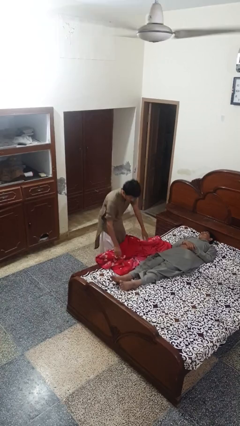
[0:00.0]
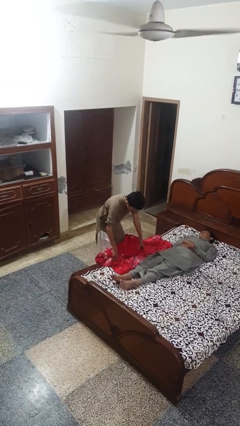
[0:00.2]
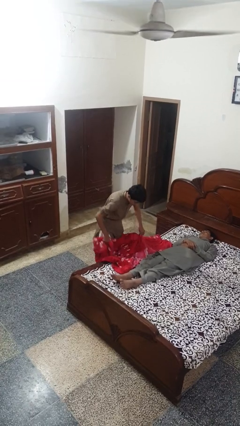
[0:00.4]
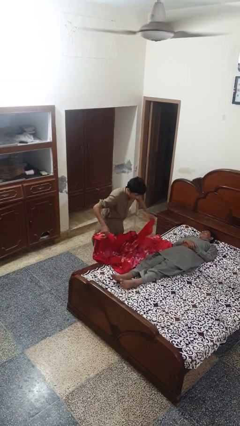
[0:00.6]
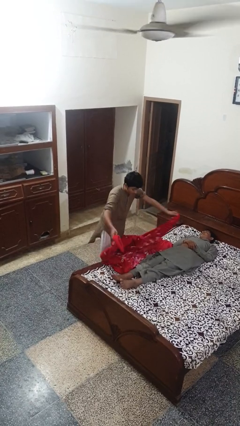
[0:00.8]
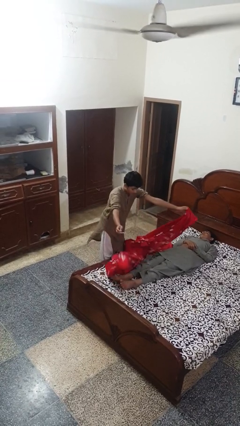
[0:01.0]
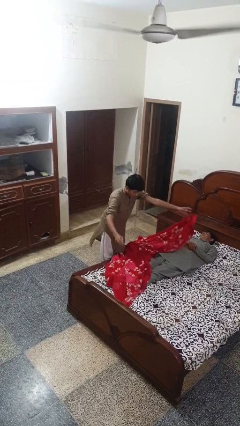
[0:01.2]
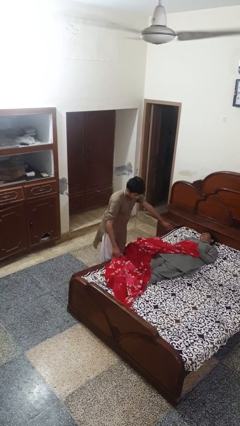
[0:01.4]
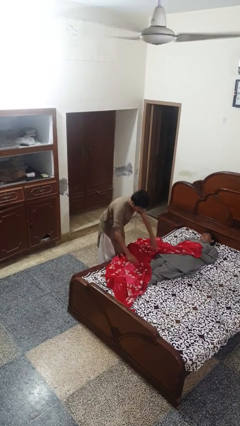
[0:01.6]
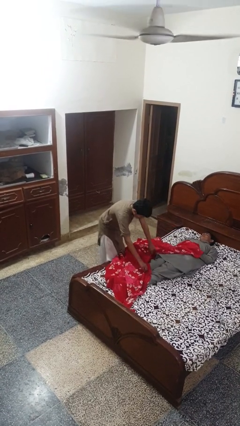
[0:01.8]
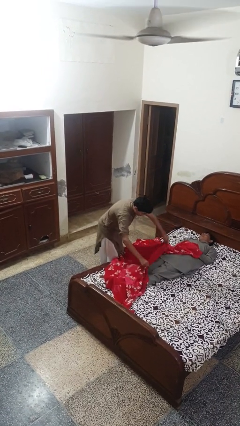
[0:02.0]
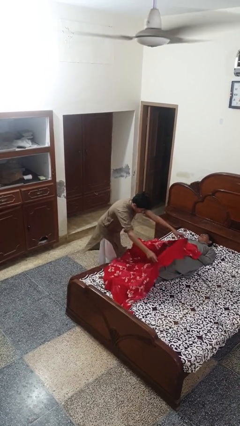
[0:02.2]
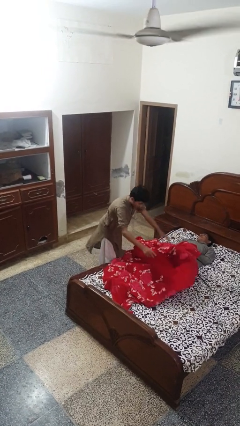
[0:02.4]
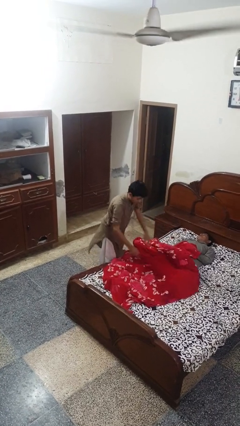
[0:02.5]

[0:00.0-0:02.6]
person covers friend with blanket

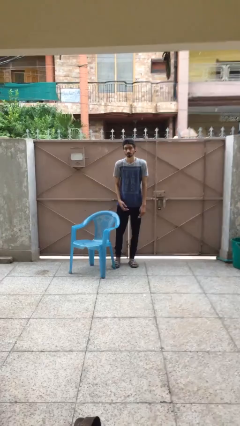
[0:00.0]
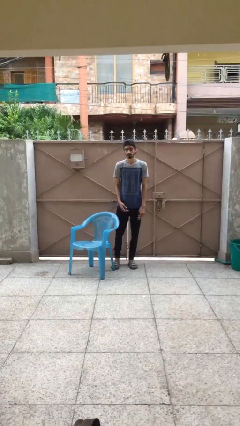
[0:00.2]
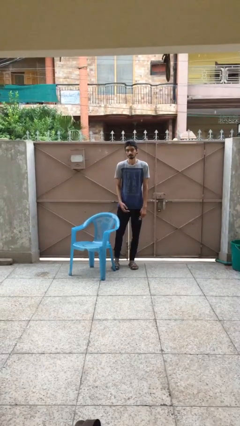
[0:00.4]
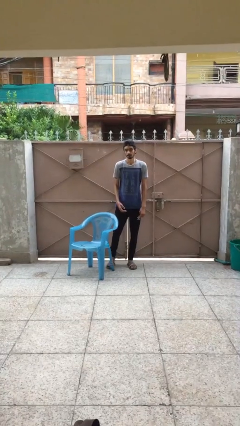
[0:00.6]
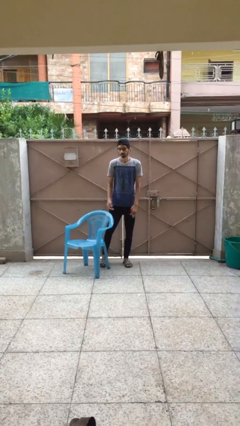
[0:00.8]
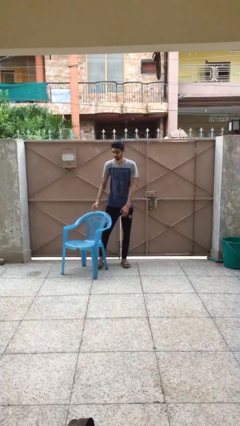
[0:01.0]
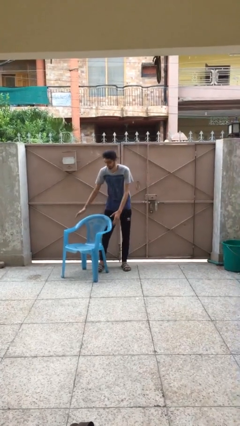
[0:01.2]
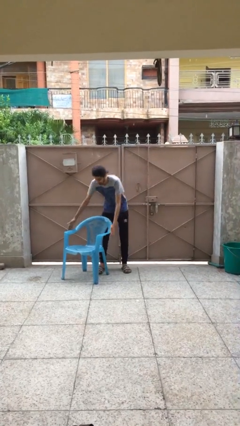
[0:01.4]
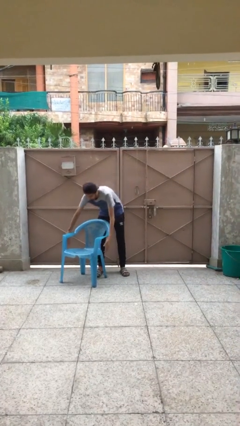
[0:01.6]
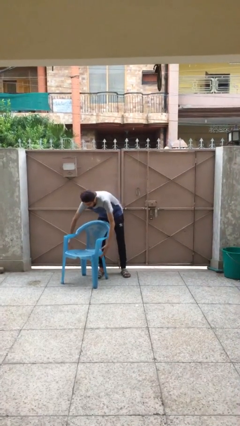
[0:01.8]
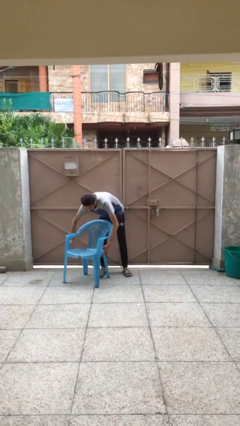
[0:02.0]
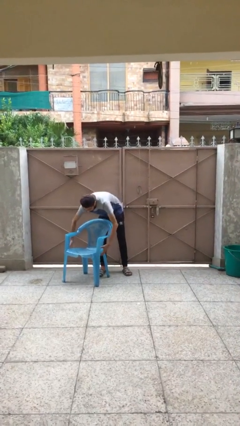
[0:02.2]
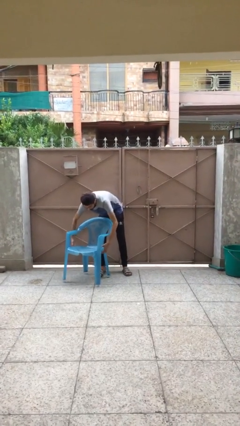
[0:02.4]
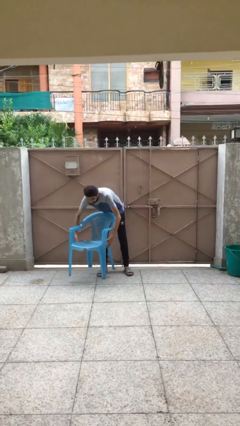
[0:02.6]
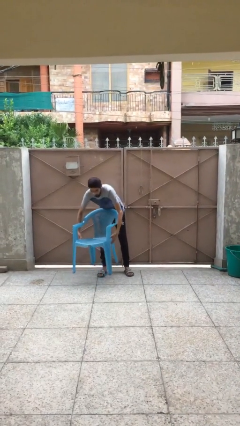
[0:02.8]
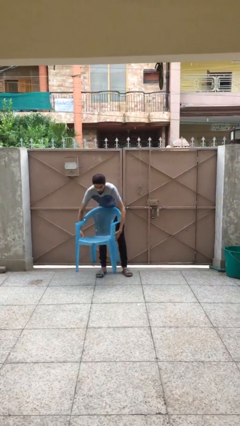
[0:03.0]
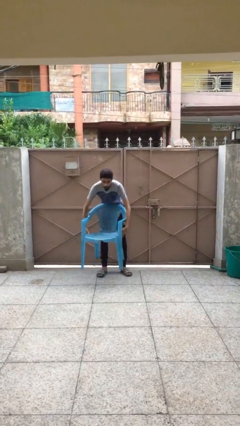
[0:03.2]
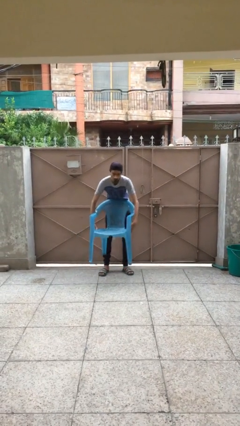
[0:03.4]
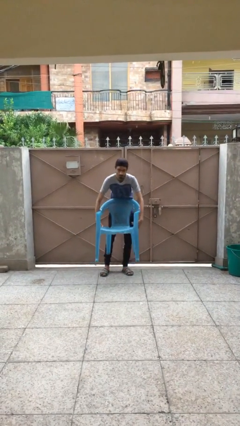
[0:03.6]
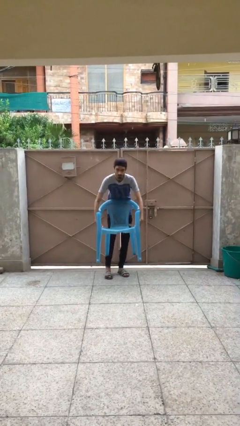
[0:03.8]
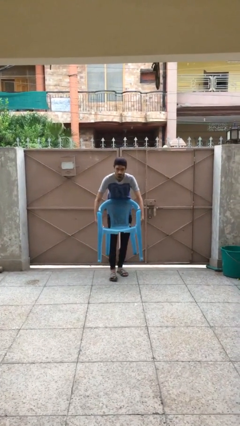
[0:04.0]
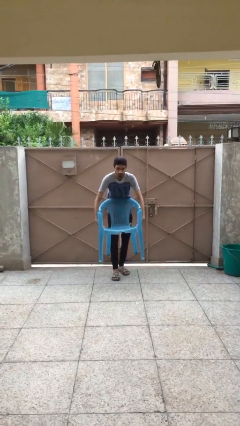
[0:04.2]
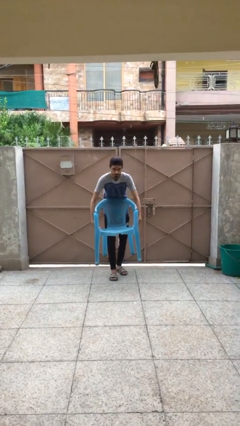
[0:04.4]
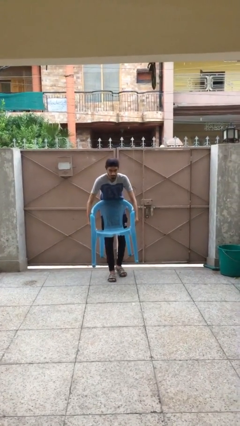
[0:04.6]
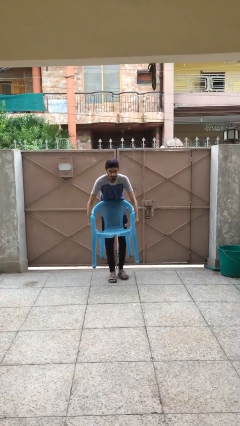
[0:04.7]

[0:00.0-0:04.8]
person carries heavy object

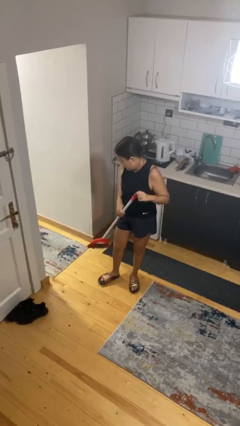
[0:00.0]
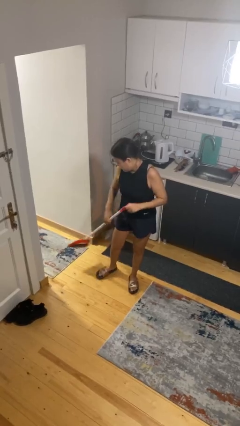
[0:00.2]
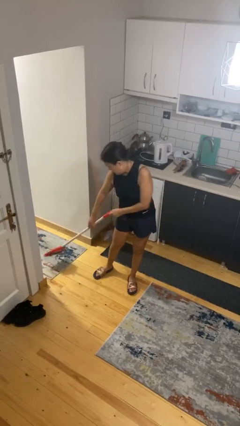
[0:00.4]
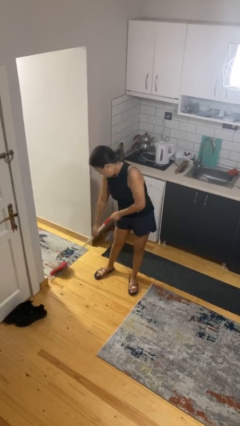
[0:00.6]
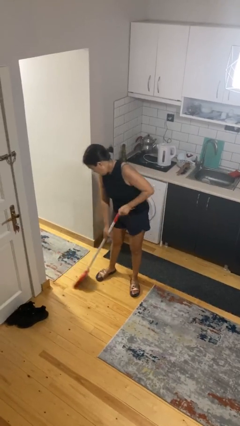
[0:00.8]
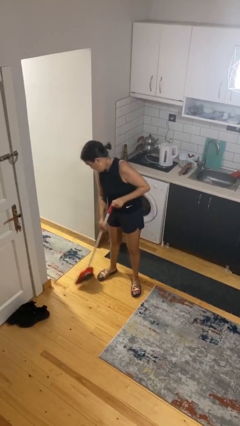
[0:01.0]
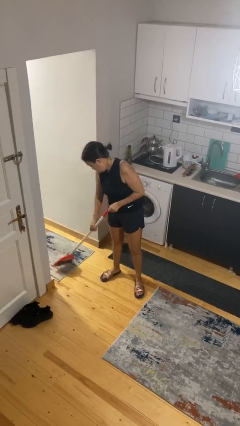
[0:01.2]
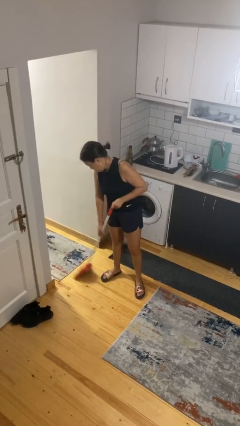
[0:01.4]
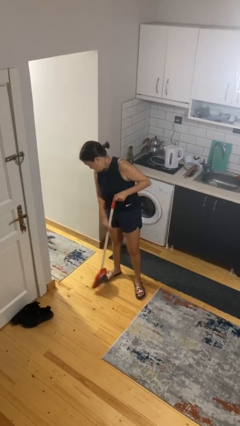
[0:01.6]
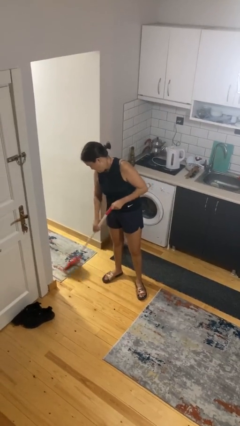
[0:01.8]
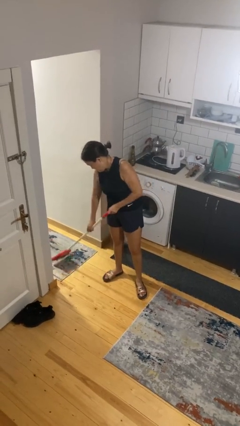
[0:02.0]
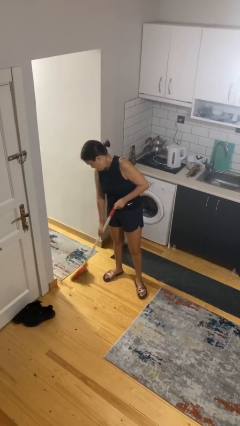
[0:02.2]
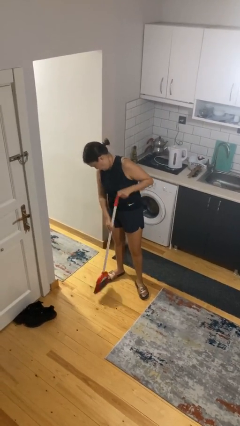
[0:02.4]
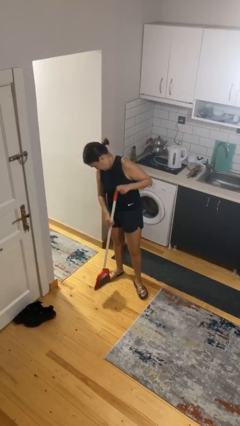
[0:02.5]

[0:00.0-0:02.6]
person sweeps floor

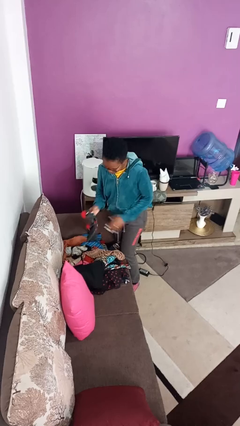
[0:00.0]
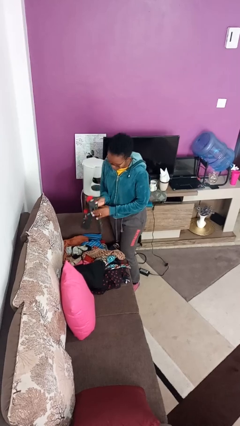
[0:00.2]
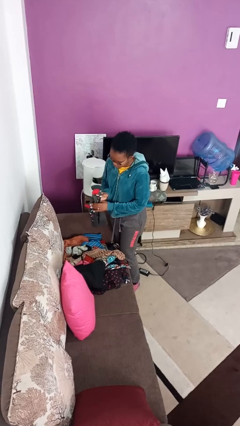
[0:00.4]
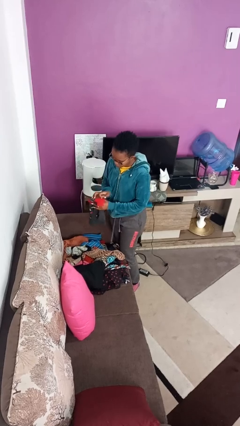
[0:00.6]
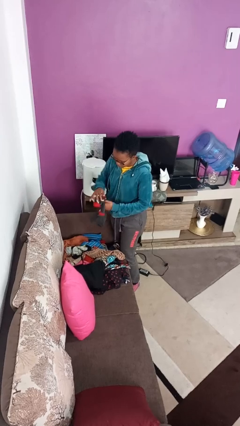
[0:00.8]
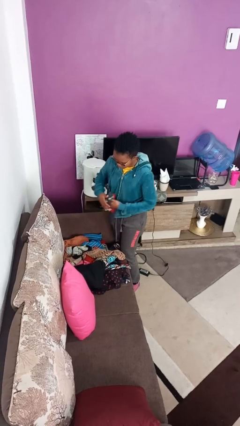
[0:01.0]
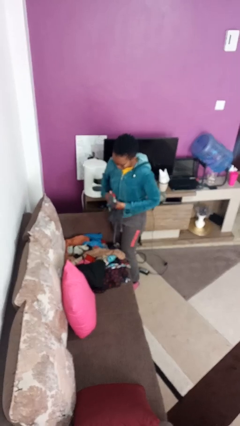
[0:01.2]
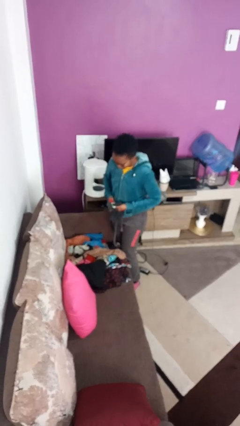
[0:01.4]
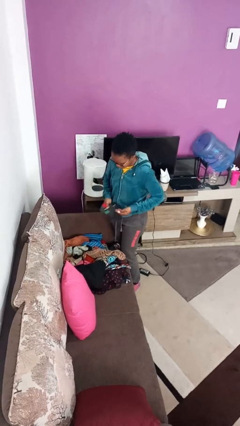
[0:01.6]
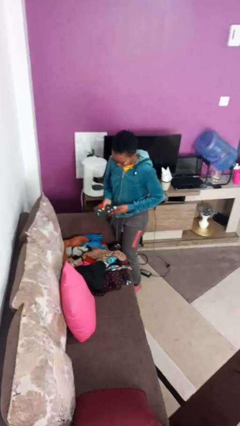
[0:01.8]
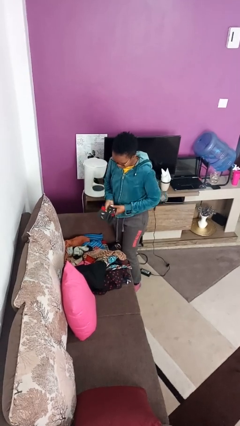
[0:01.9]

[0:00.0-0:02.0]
person folds socks

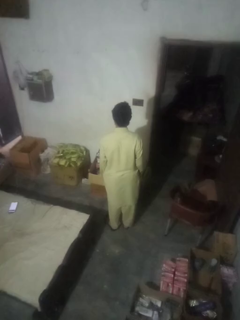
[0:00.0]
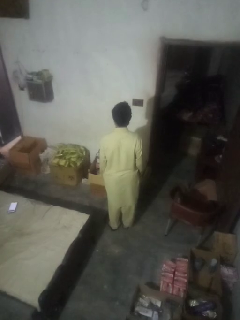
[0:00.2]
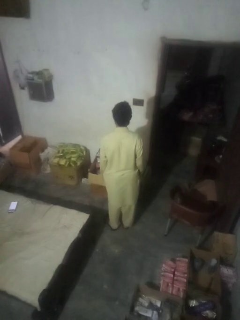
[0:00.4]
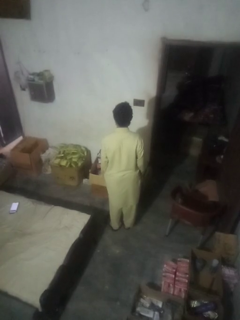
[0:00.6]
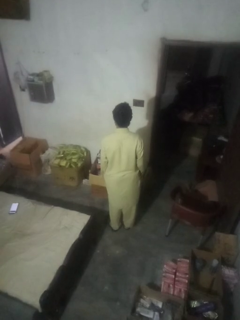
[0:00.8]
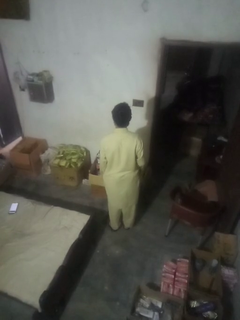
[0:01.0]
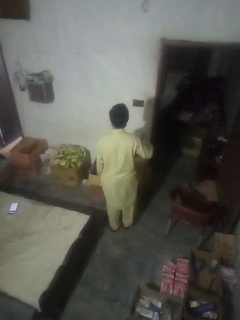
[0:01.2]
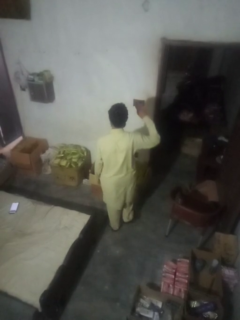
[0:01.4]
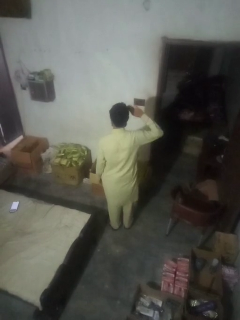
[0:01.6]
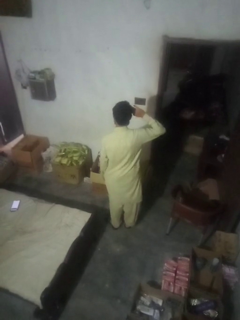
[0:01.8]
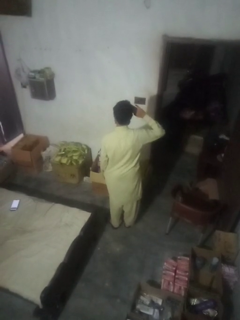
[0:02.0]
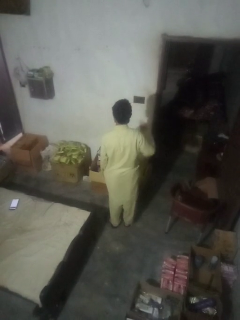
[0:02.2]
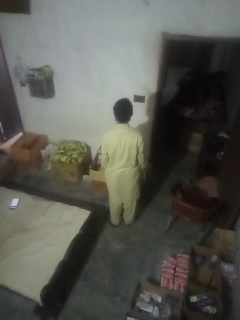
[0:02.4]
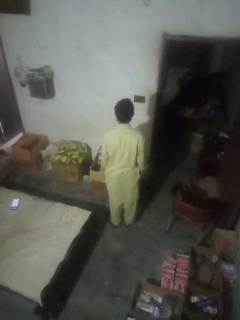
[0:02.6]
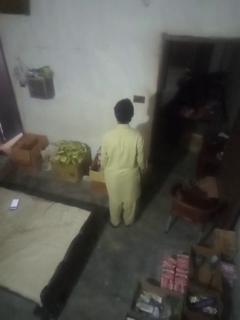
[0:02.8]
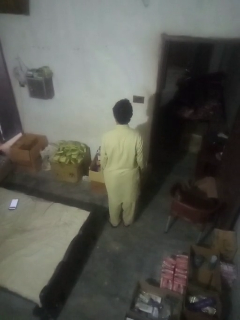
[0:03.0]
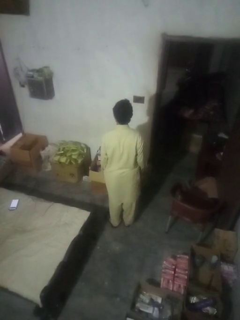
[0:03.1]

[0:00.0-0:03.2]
person salutes

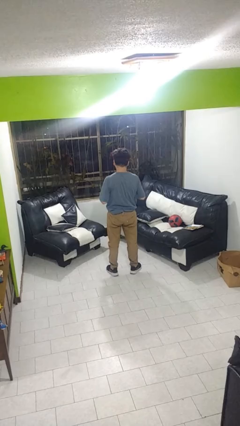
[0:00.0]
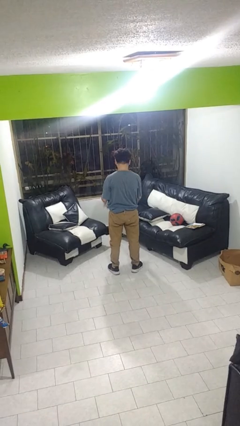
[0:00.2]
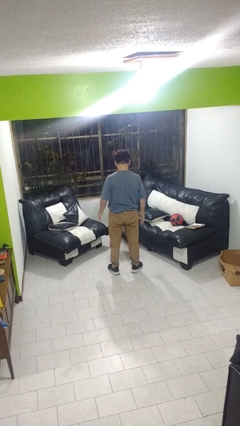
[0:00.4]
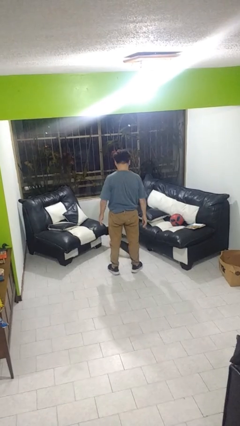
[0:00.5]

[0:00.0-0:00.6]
person drops object

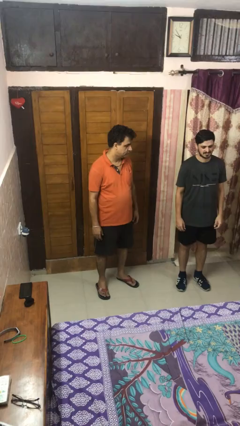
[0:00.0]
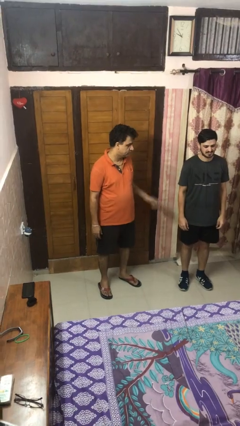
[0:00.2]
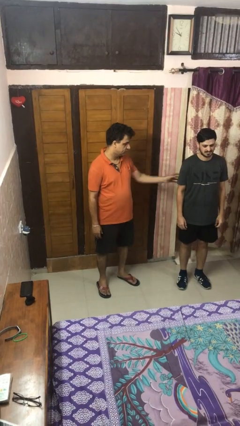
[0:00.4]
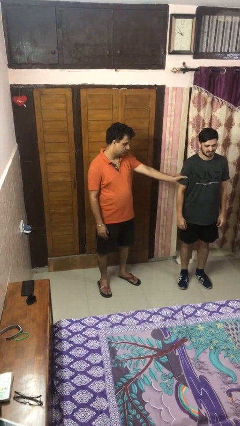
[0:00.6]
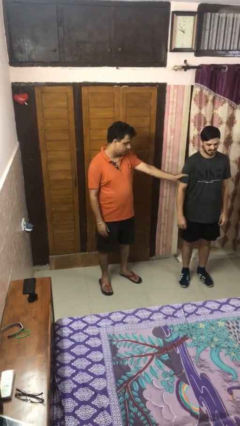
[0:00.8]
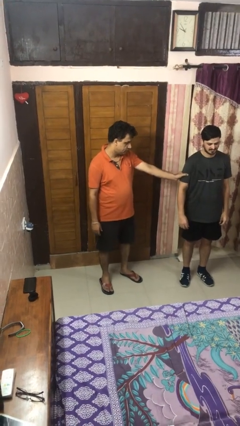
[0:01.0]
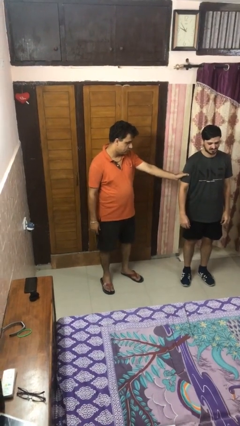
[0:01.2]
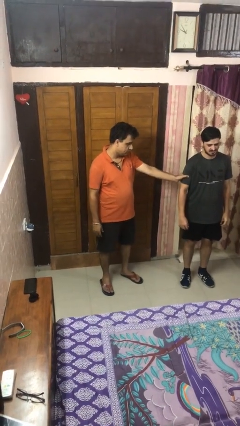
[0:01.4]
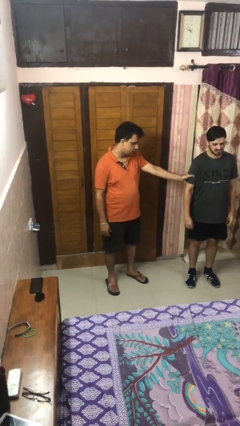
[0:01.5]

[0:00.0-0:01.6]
person grabs person by bicep

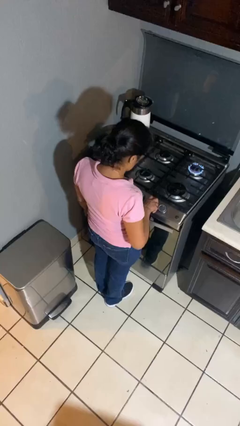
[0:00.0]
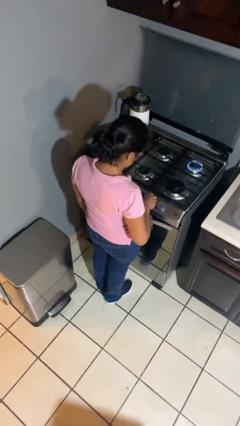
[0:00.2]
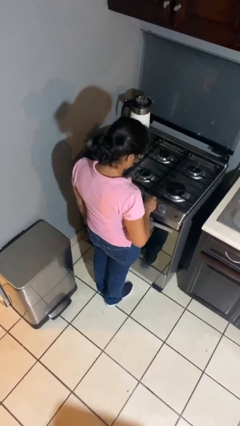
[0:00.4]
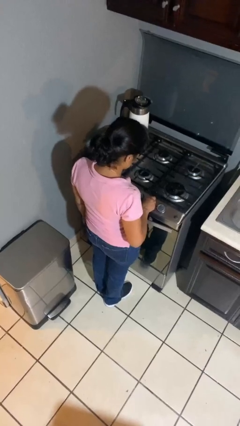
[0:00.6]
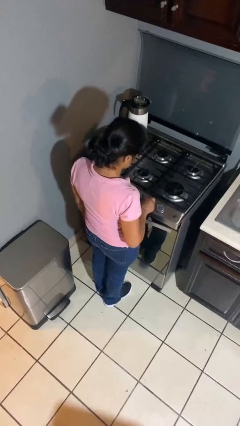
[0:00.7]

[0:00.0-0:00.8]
person turns off stovetop
